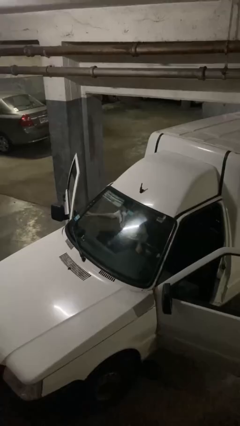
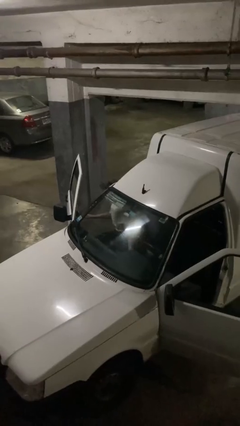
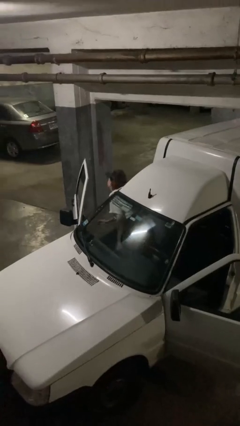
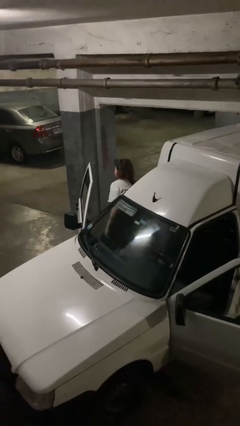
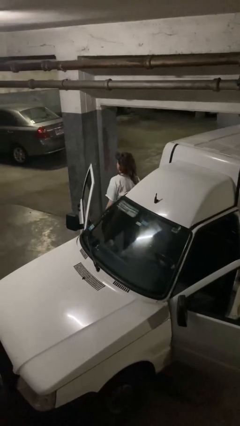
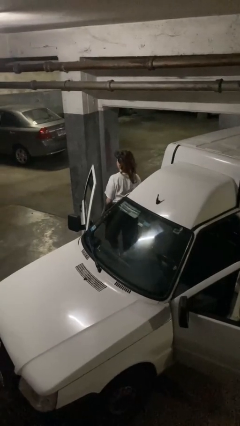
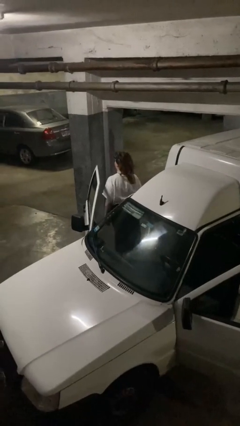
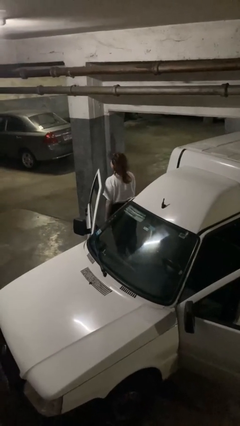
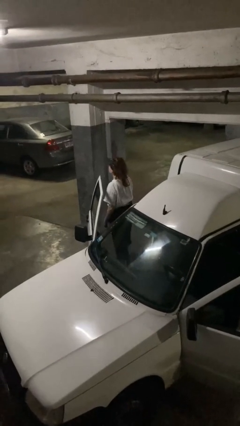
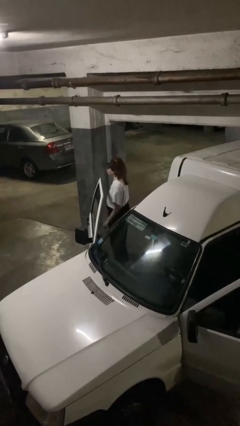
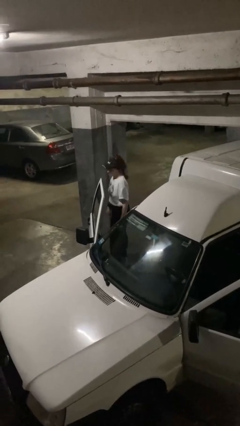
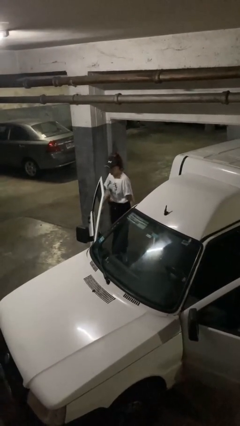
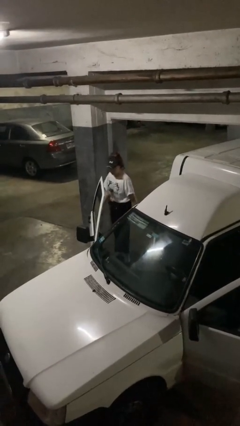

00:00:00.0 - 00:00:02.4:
person exits car

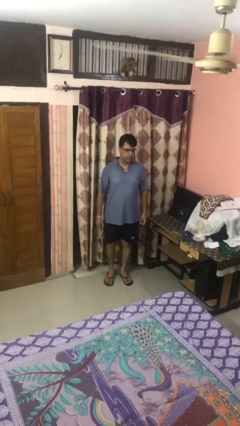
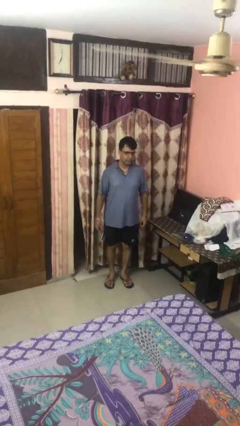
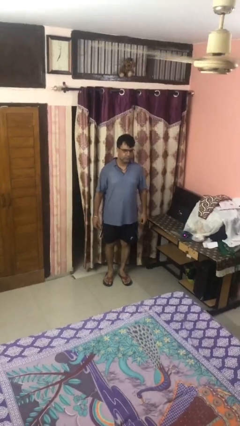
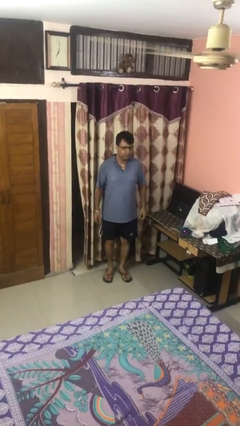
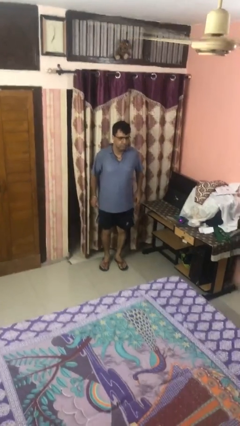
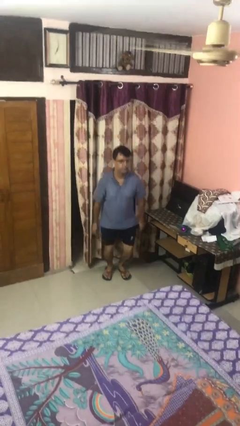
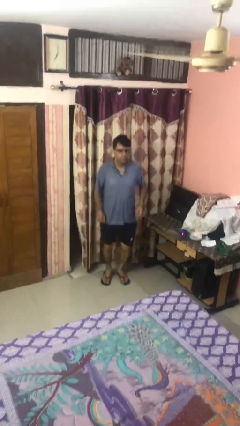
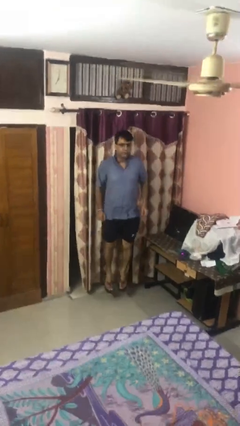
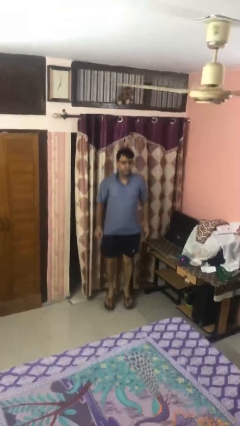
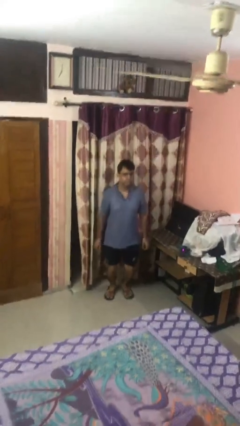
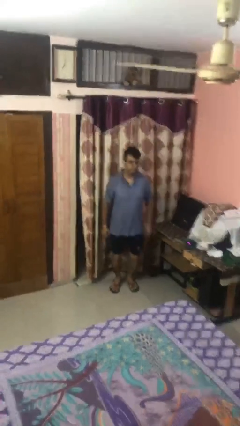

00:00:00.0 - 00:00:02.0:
person jumps

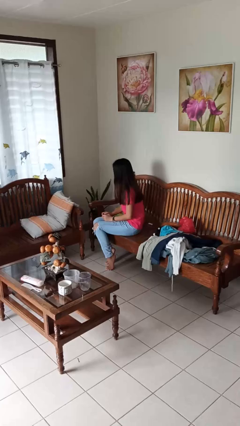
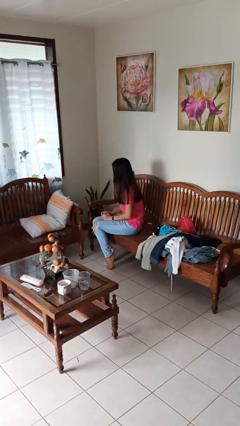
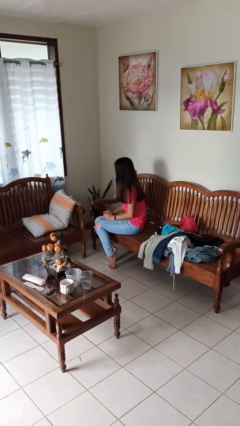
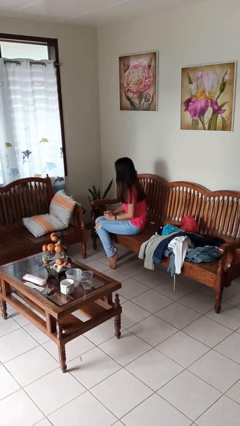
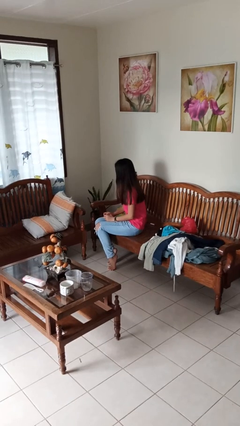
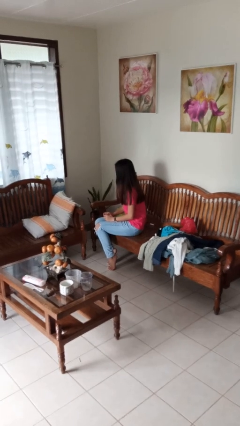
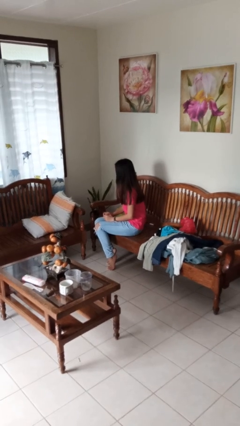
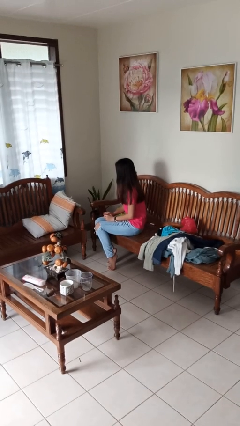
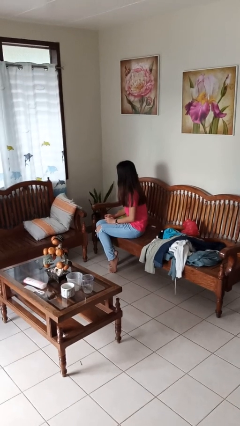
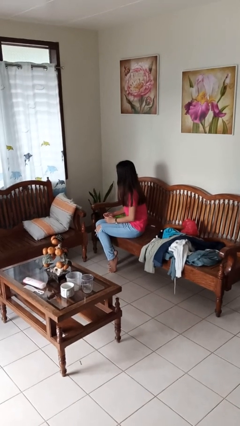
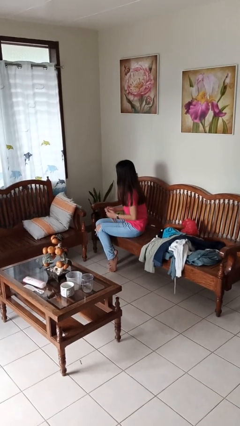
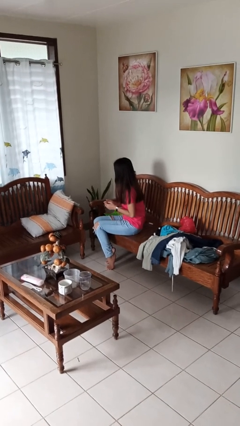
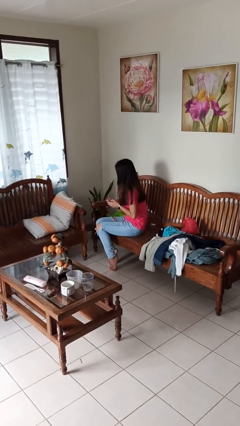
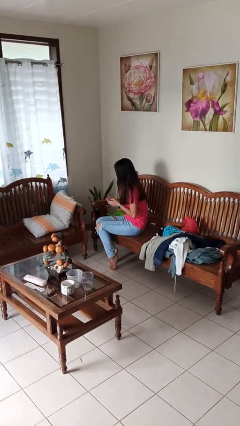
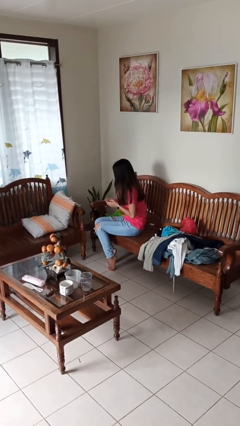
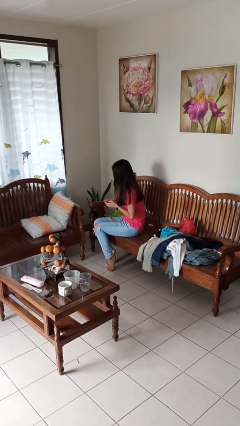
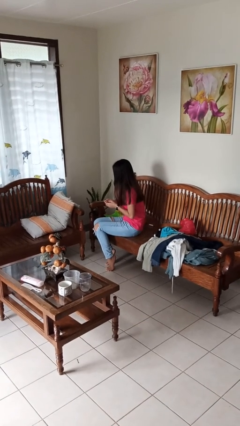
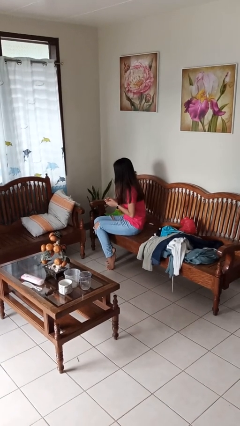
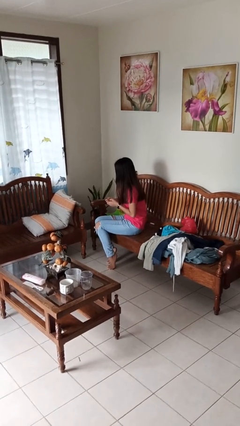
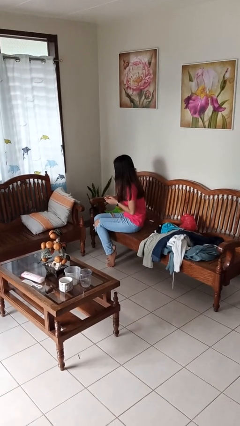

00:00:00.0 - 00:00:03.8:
person clips fingernails

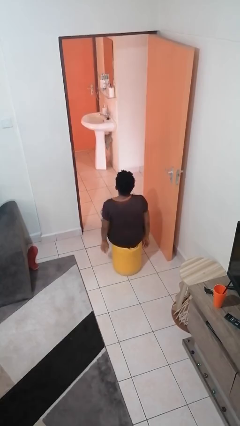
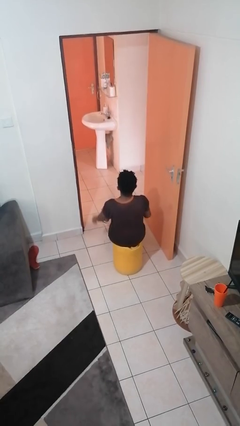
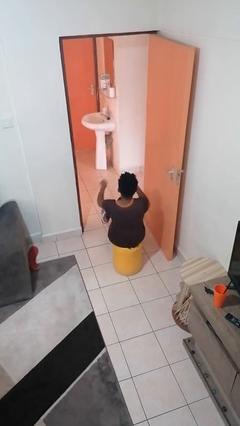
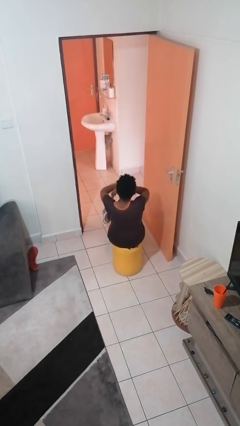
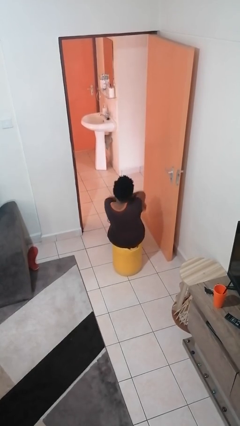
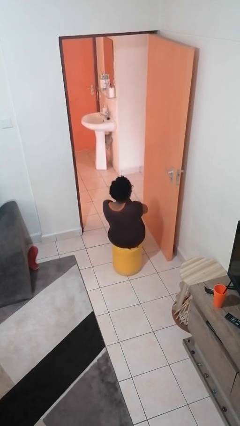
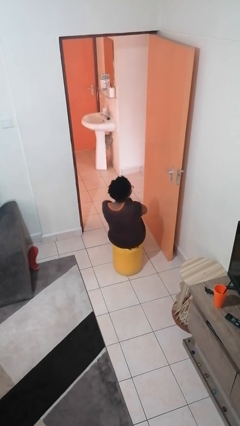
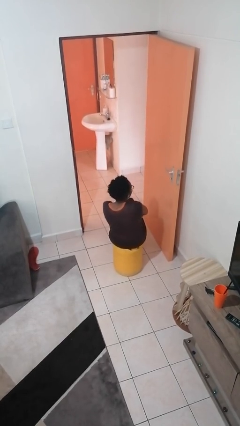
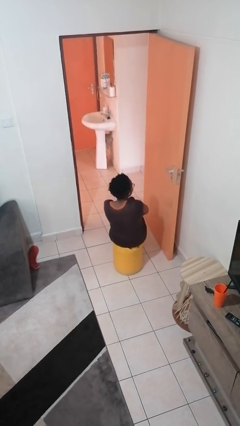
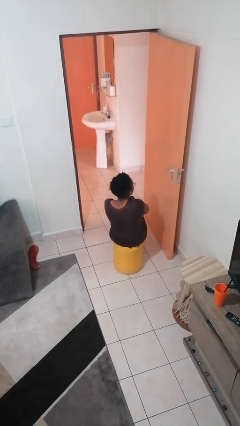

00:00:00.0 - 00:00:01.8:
person crosses arms

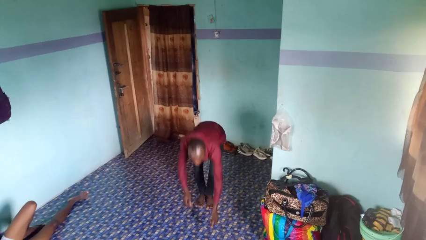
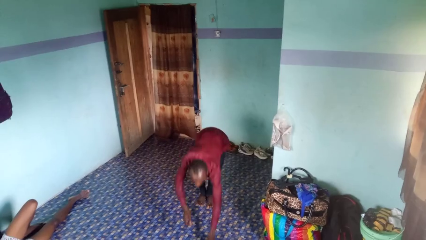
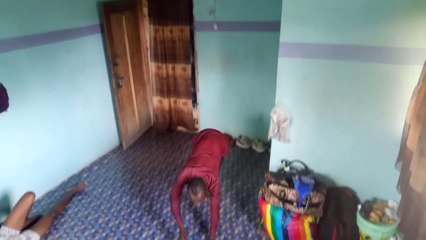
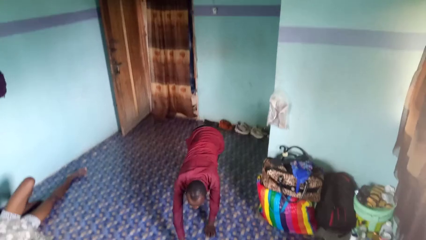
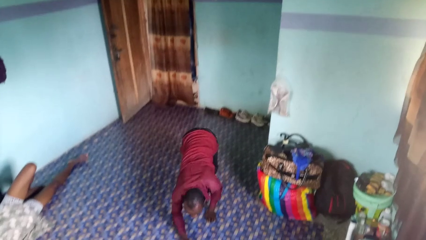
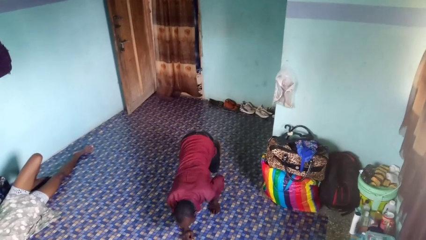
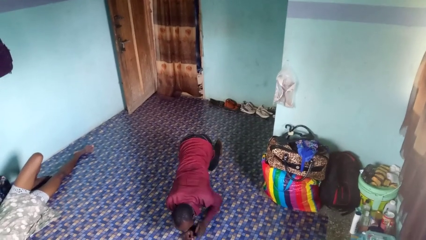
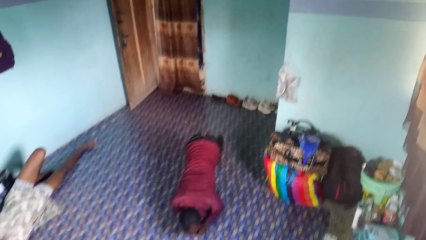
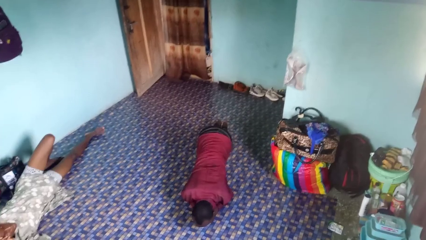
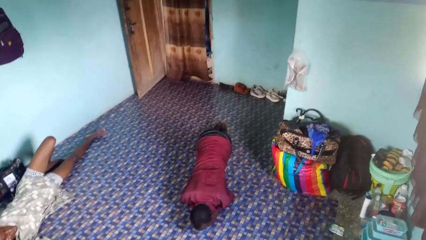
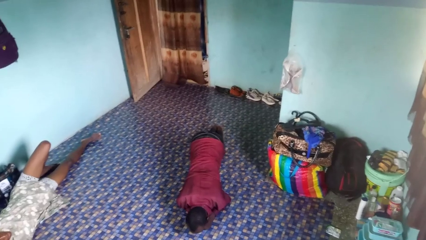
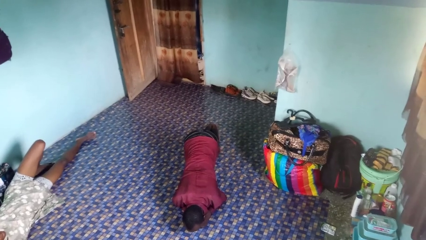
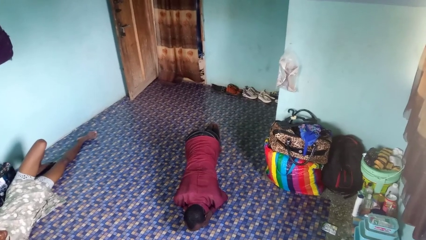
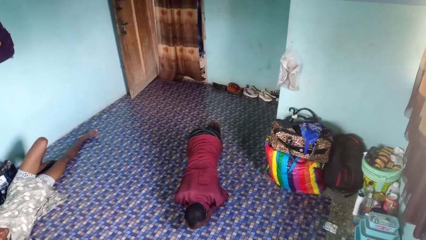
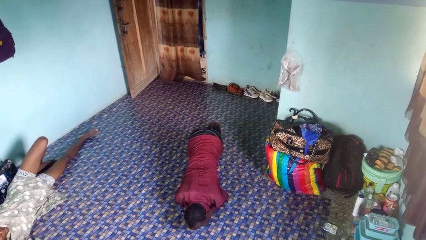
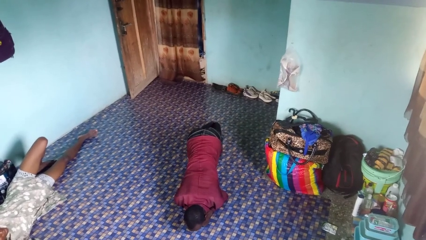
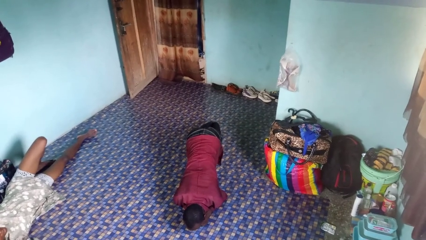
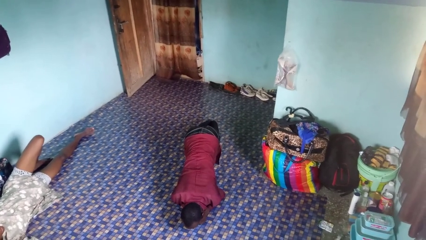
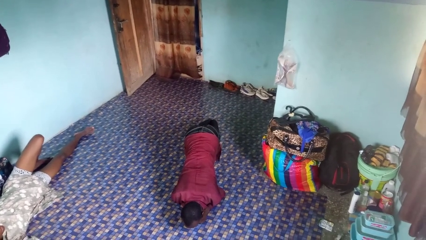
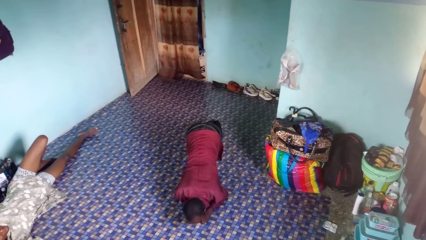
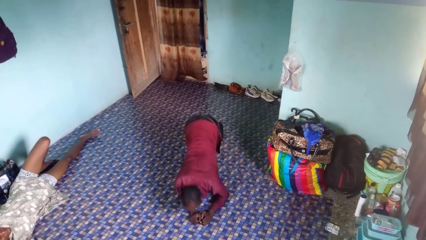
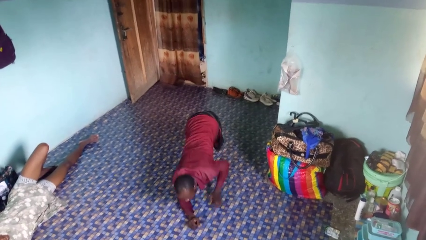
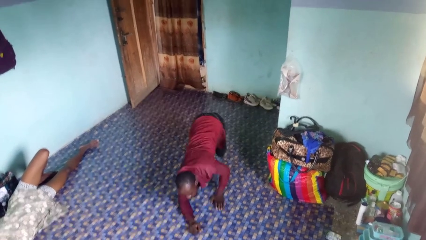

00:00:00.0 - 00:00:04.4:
person exercises with plank

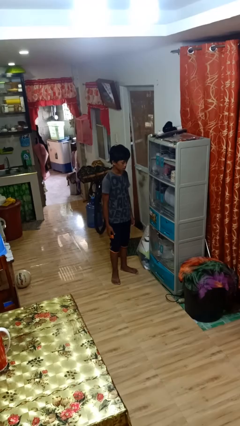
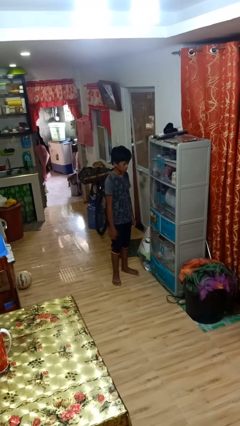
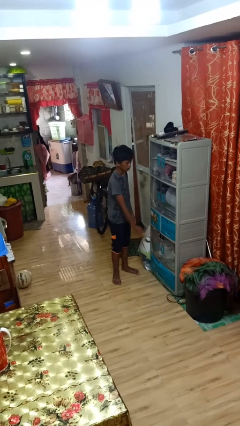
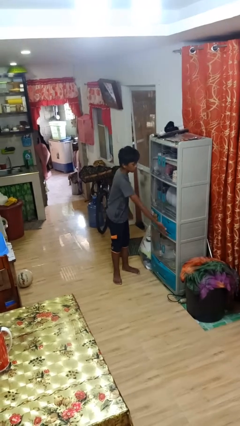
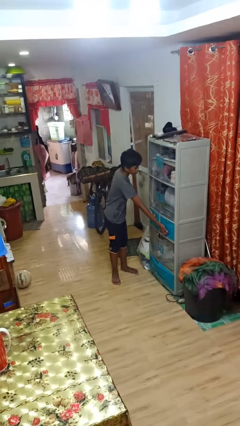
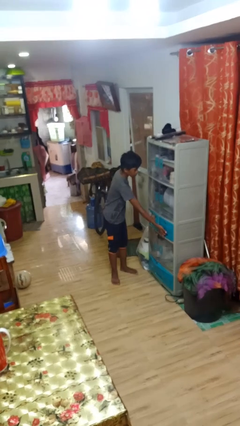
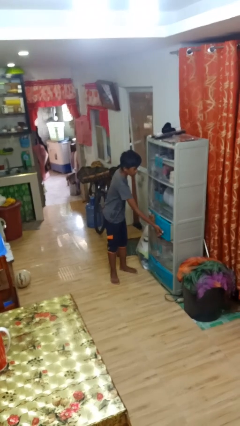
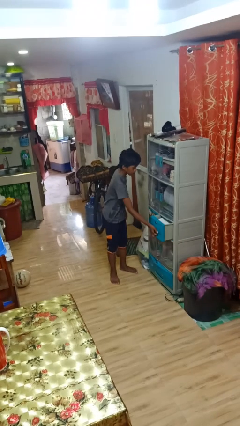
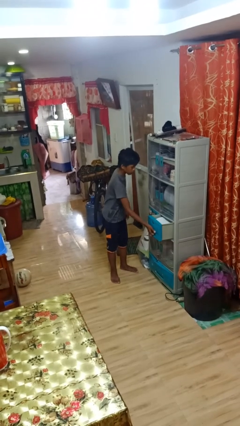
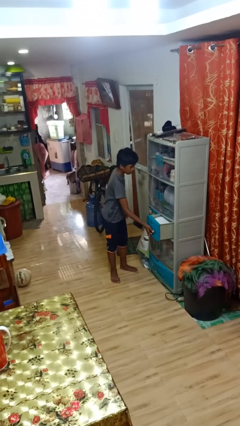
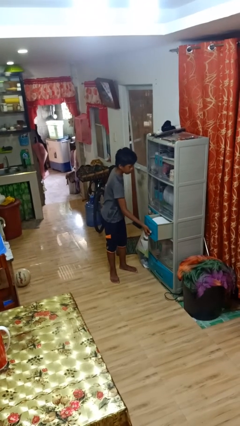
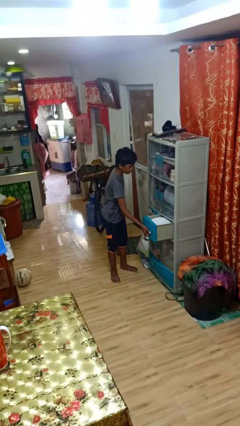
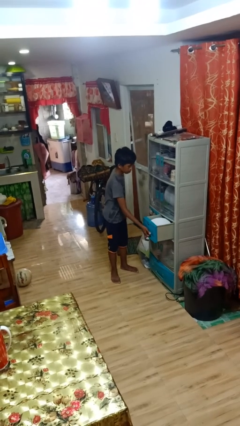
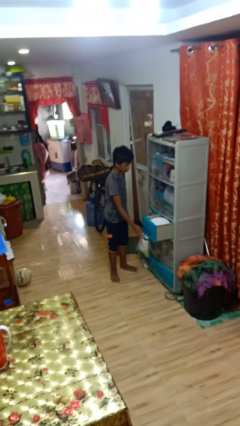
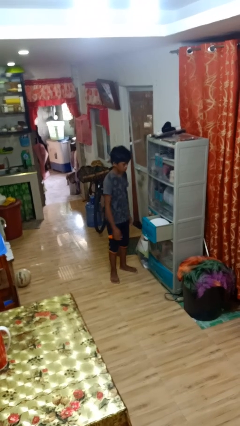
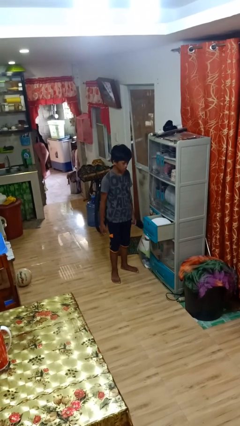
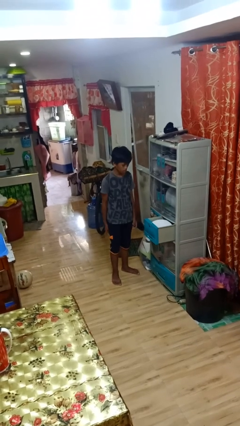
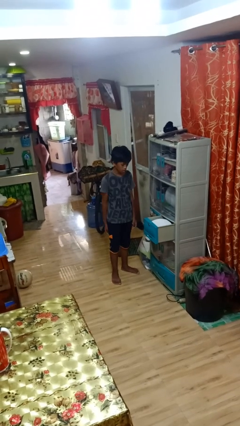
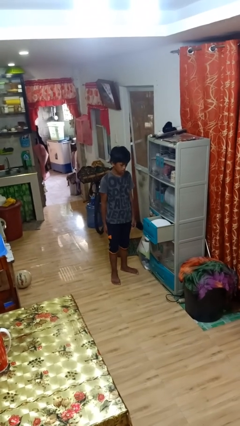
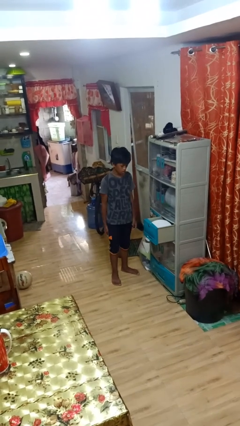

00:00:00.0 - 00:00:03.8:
person opens kitchen drawer
